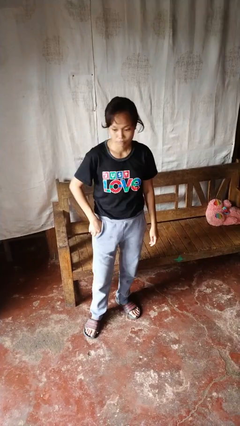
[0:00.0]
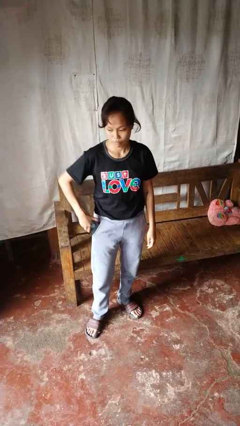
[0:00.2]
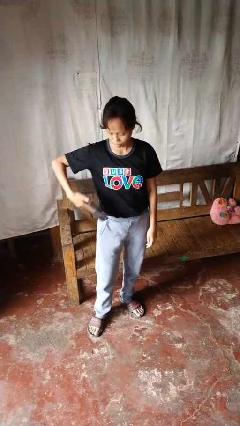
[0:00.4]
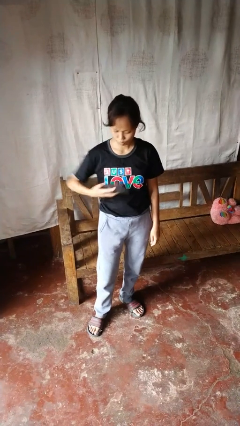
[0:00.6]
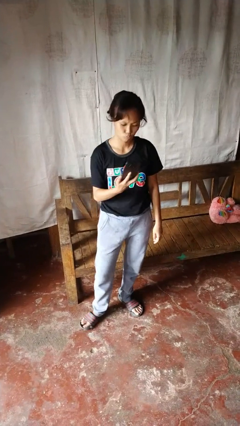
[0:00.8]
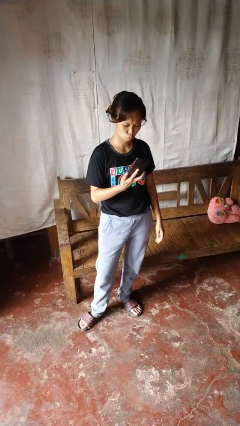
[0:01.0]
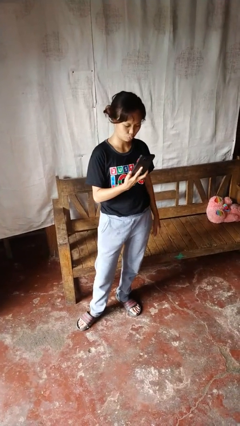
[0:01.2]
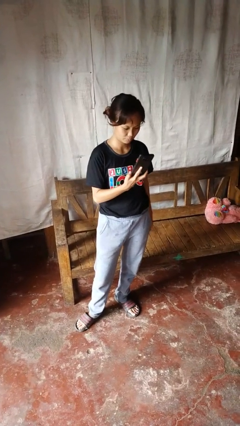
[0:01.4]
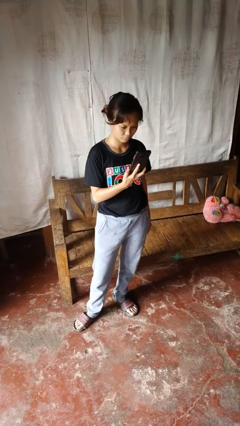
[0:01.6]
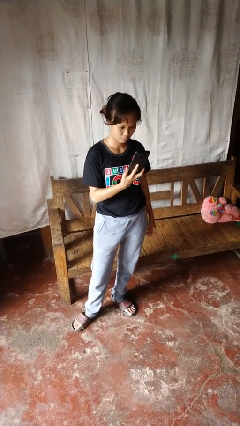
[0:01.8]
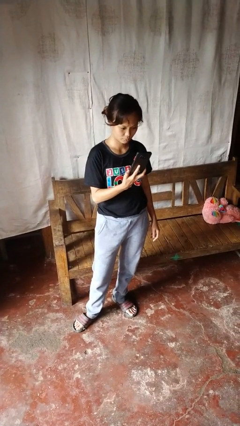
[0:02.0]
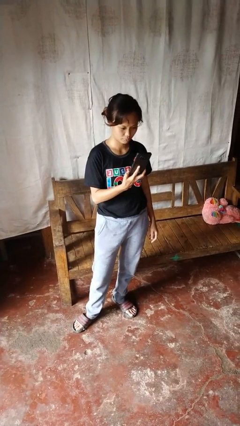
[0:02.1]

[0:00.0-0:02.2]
person takes phone from pocket

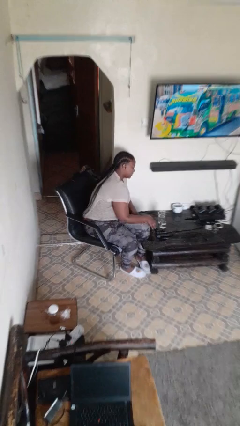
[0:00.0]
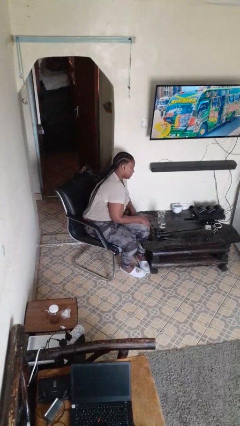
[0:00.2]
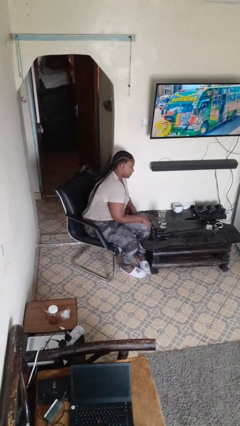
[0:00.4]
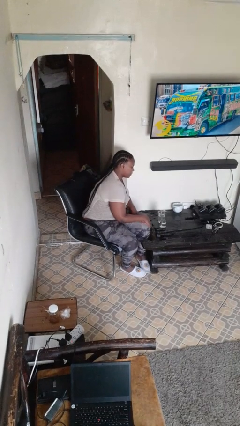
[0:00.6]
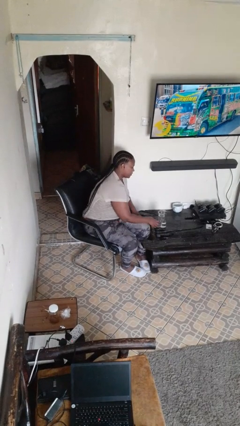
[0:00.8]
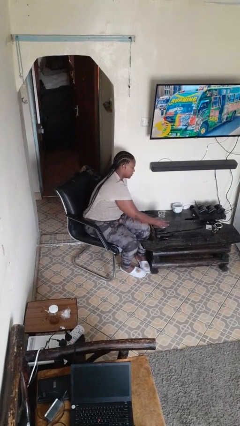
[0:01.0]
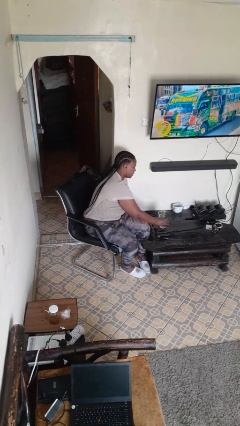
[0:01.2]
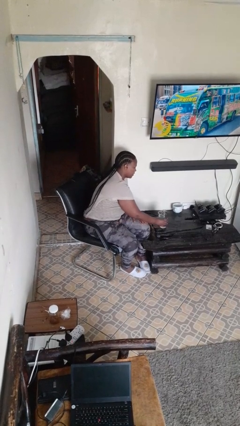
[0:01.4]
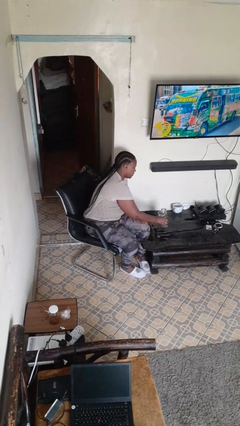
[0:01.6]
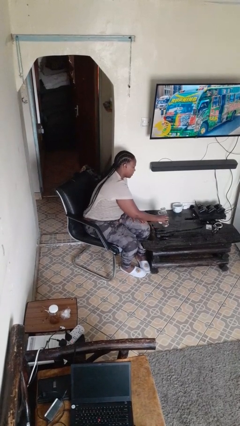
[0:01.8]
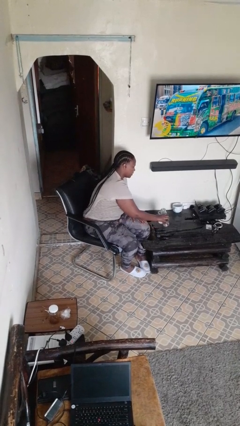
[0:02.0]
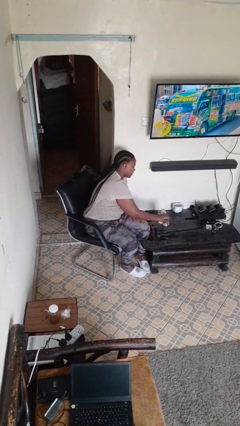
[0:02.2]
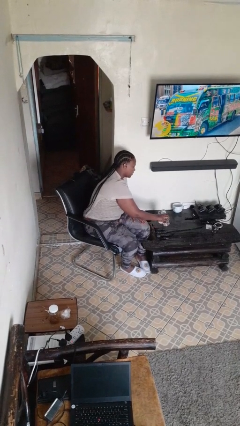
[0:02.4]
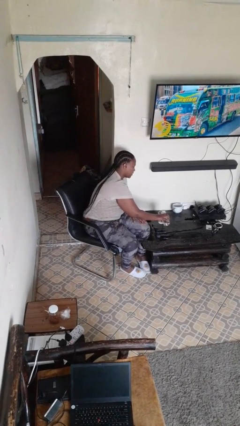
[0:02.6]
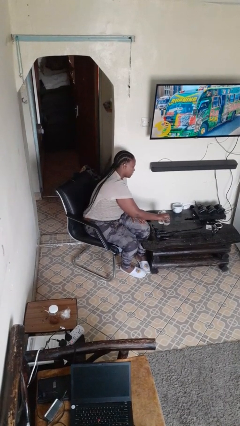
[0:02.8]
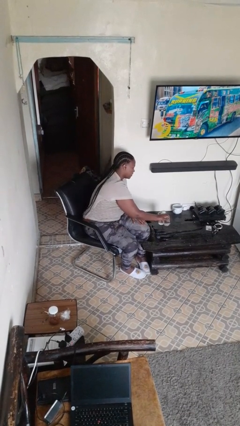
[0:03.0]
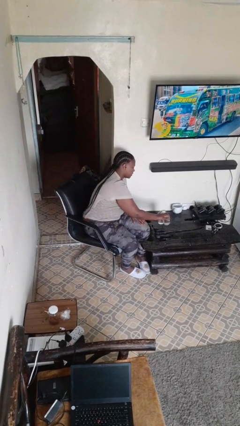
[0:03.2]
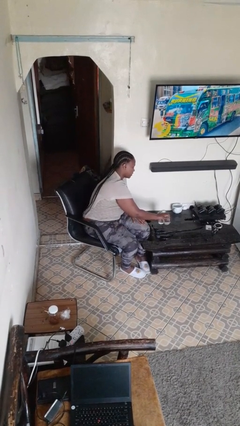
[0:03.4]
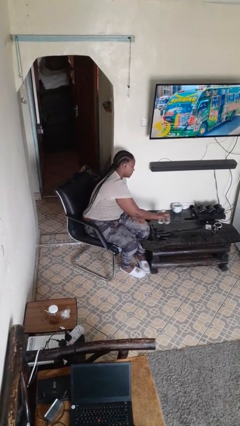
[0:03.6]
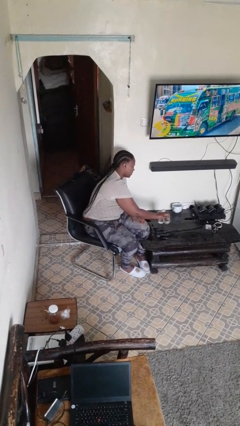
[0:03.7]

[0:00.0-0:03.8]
person pours liquid into cup

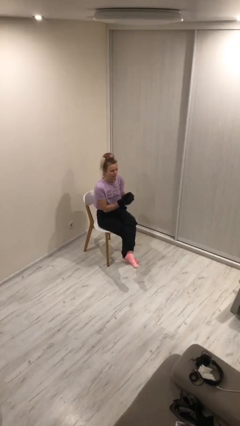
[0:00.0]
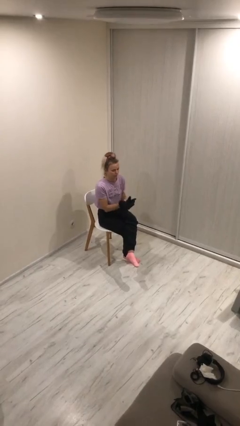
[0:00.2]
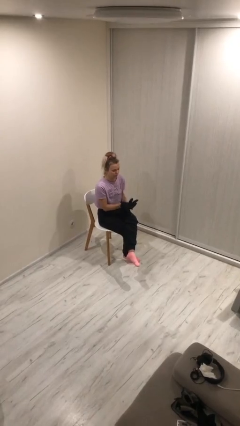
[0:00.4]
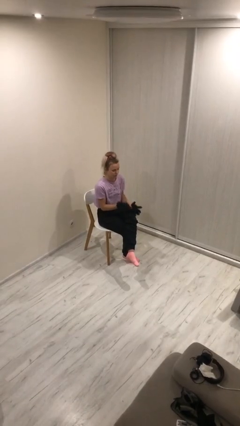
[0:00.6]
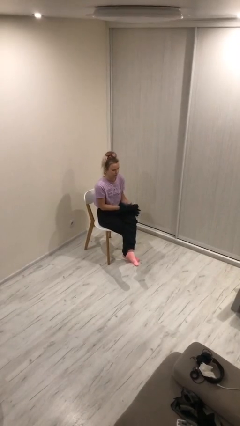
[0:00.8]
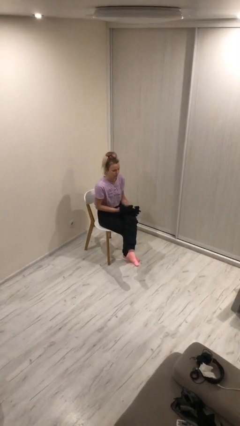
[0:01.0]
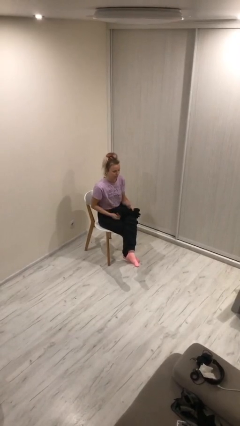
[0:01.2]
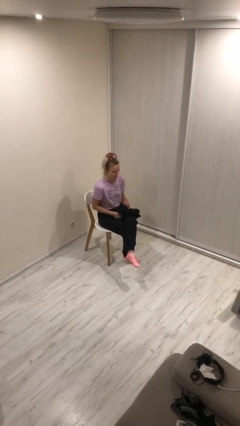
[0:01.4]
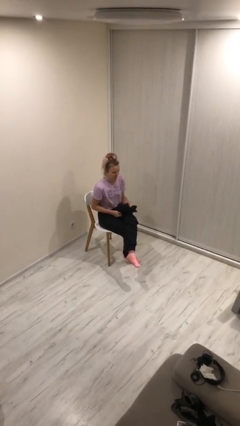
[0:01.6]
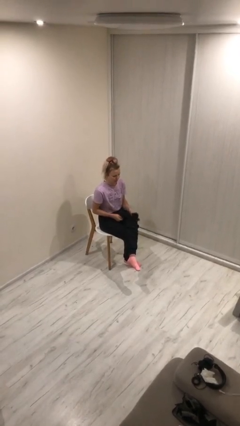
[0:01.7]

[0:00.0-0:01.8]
person takes off gloves

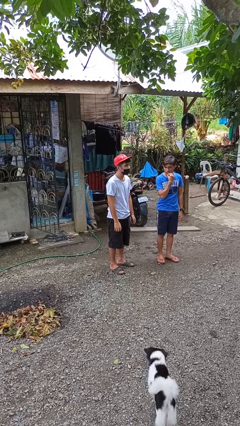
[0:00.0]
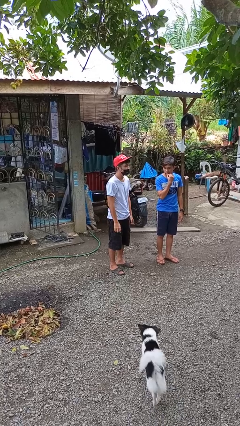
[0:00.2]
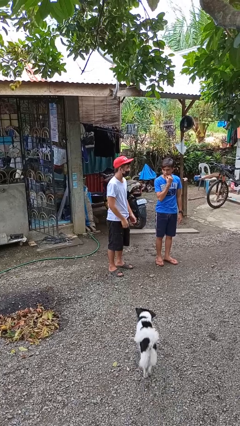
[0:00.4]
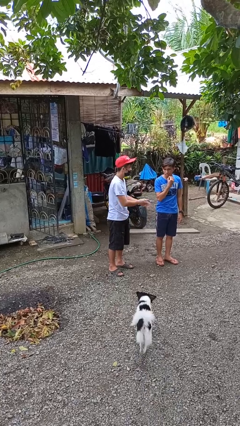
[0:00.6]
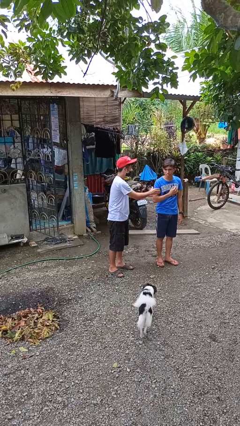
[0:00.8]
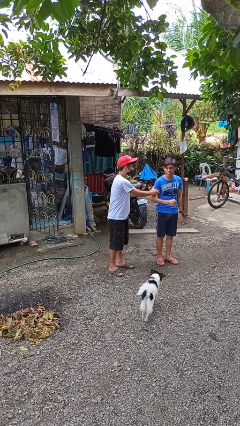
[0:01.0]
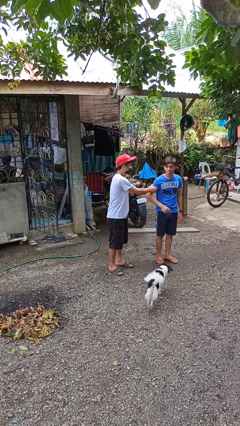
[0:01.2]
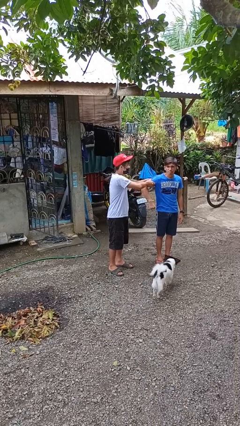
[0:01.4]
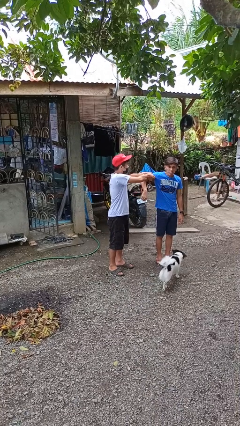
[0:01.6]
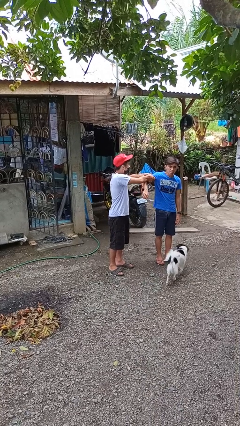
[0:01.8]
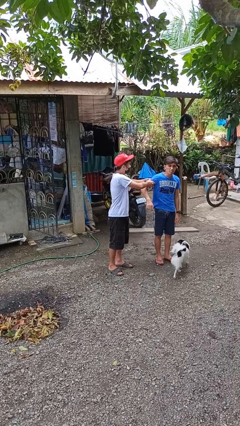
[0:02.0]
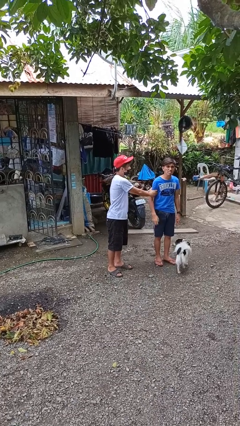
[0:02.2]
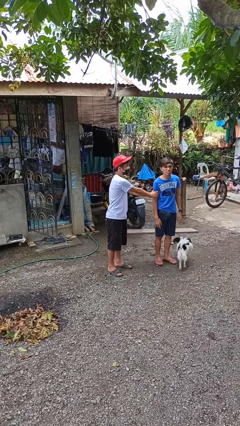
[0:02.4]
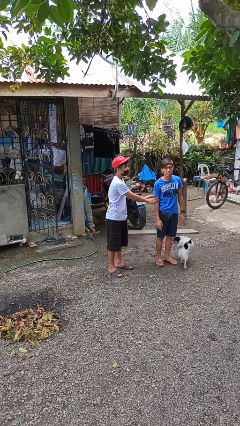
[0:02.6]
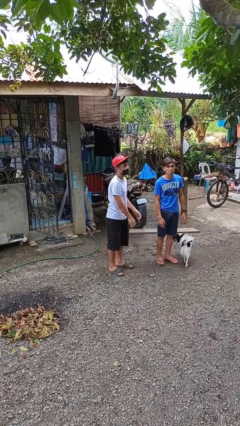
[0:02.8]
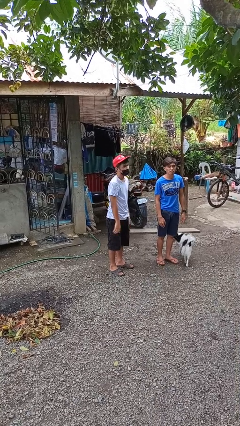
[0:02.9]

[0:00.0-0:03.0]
person grabs person by bicep

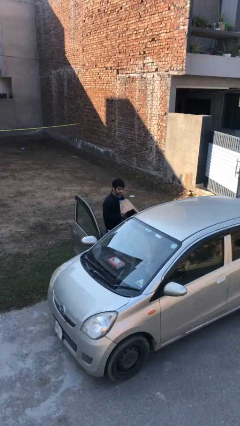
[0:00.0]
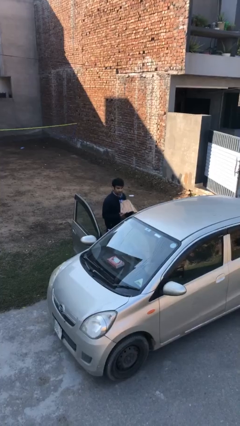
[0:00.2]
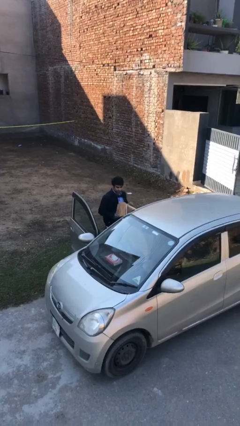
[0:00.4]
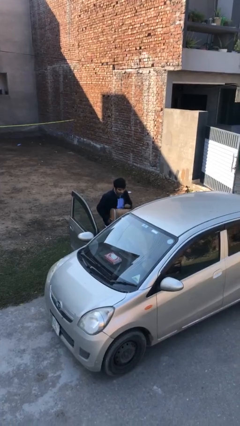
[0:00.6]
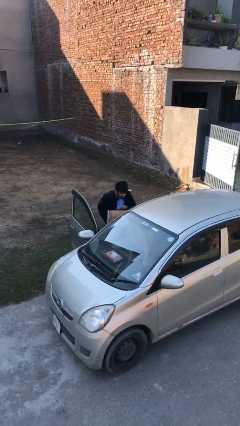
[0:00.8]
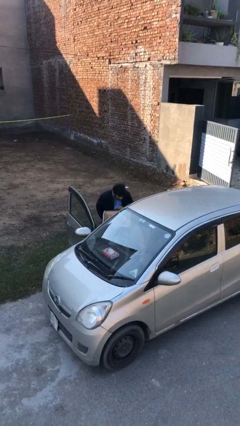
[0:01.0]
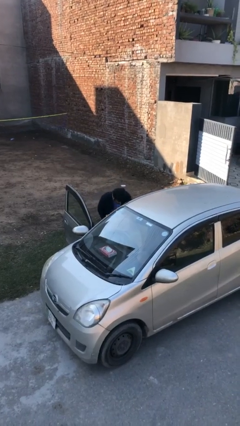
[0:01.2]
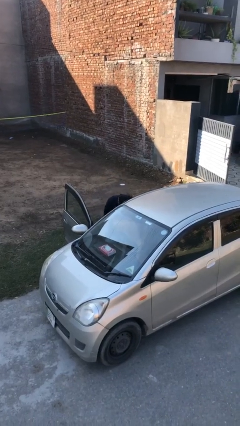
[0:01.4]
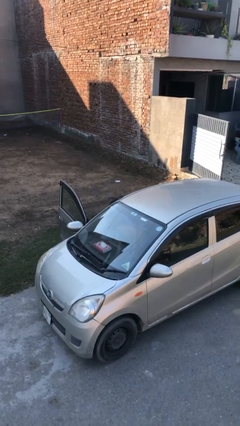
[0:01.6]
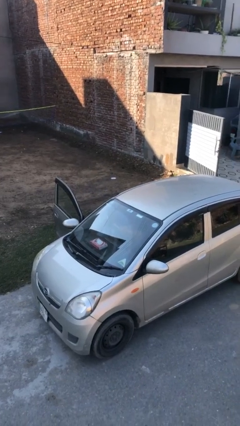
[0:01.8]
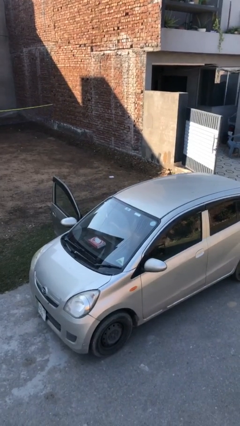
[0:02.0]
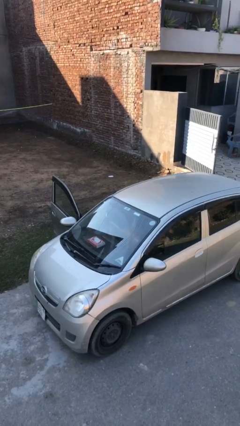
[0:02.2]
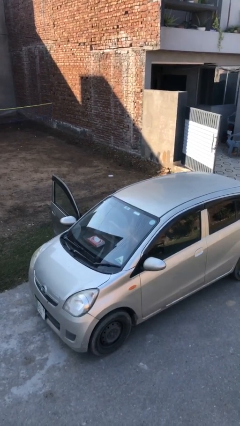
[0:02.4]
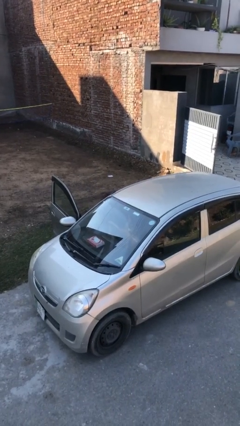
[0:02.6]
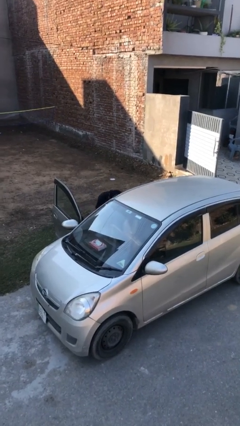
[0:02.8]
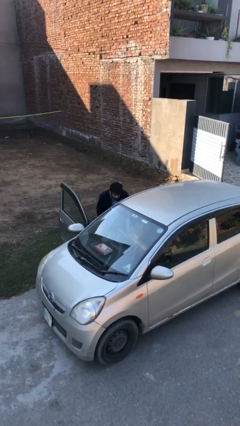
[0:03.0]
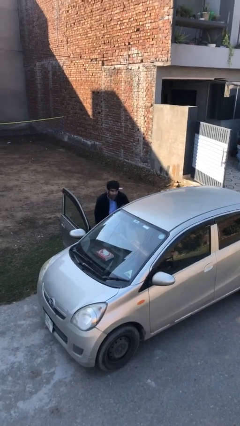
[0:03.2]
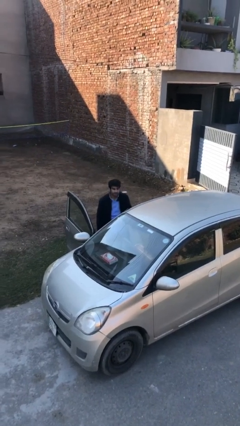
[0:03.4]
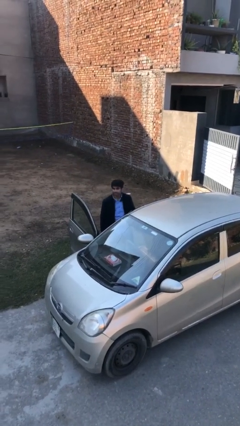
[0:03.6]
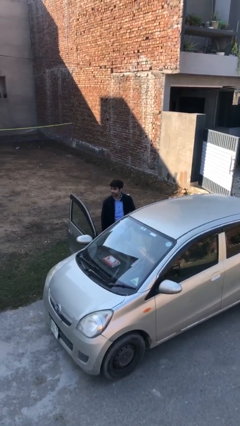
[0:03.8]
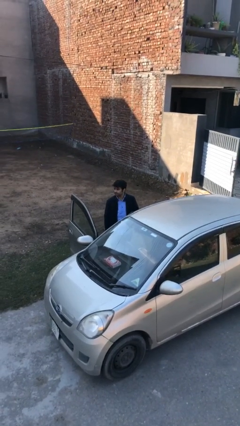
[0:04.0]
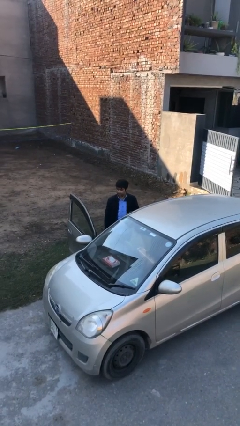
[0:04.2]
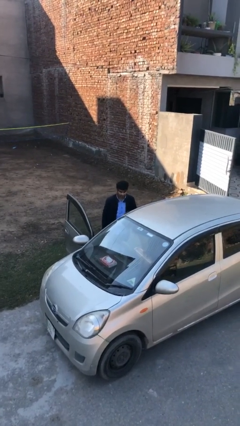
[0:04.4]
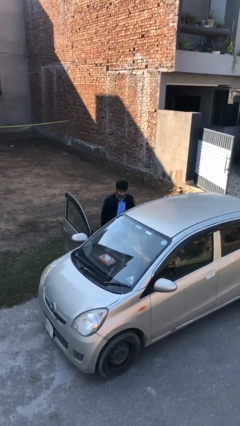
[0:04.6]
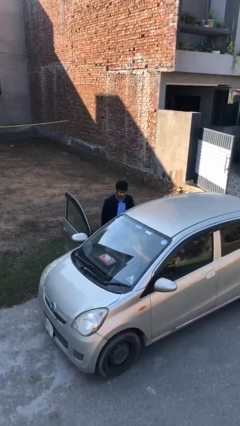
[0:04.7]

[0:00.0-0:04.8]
person loads car

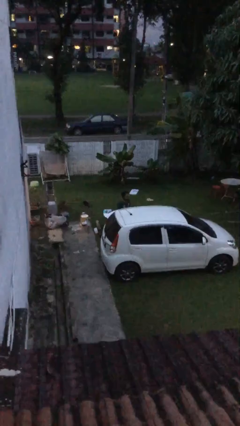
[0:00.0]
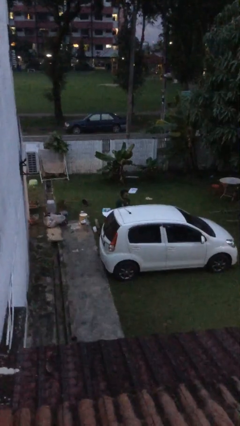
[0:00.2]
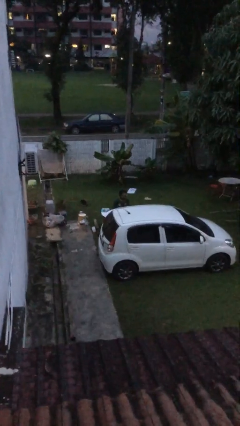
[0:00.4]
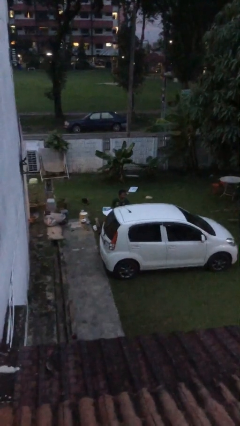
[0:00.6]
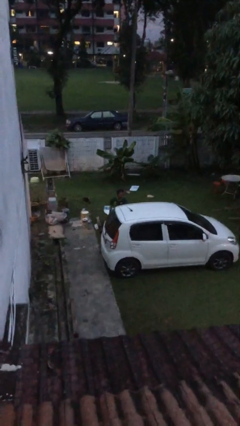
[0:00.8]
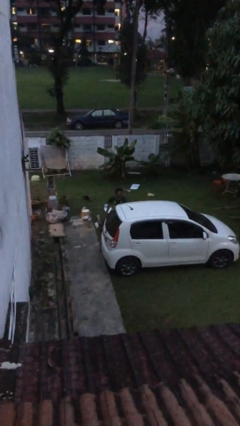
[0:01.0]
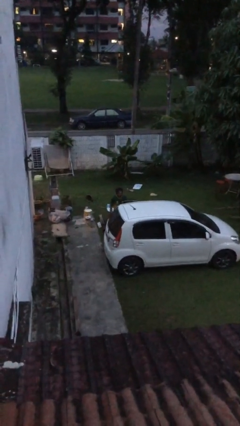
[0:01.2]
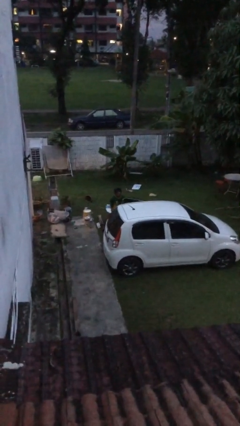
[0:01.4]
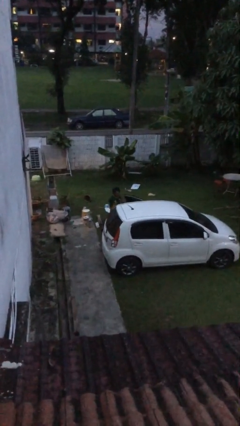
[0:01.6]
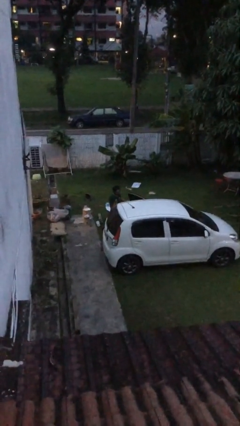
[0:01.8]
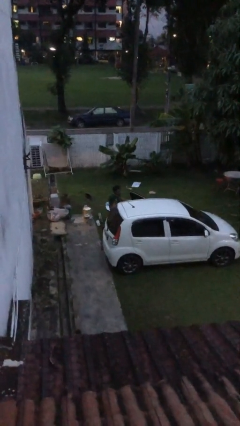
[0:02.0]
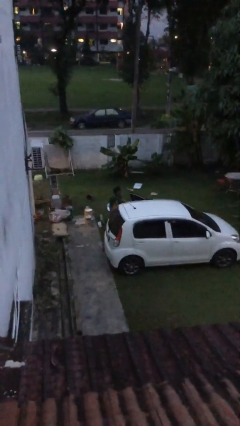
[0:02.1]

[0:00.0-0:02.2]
person opens car door
